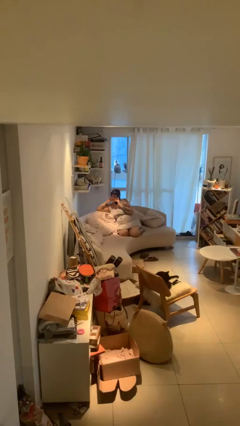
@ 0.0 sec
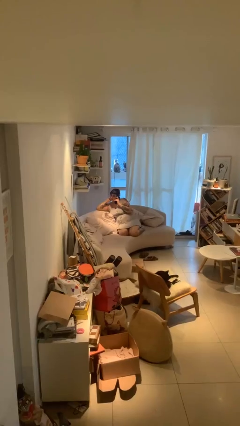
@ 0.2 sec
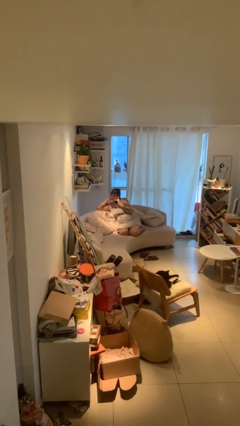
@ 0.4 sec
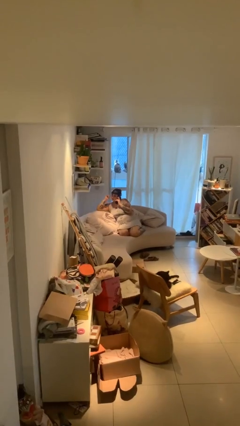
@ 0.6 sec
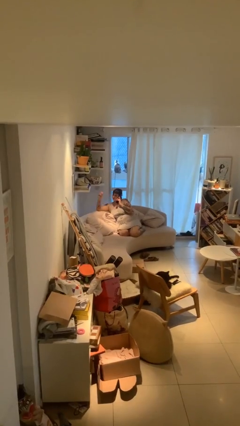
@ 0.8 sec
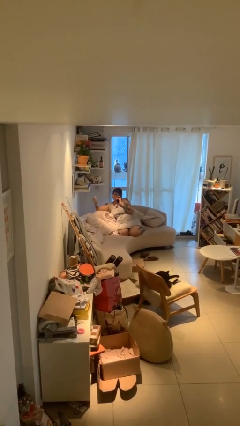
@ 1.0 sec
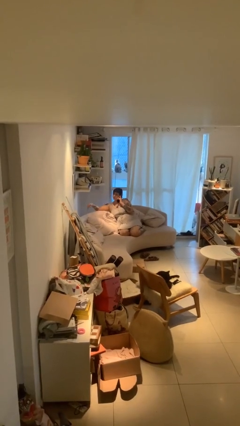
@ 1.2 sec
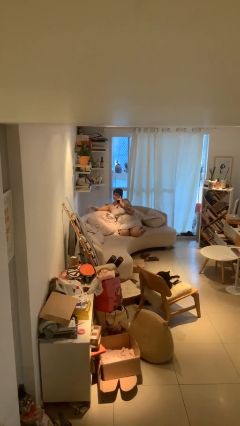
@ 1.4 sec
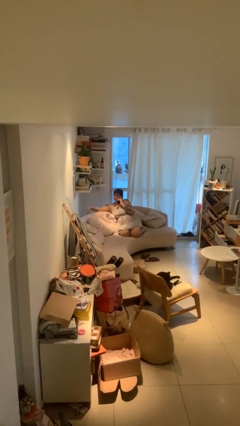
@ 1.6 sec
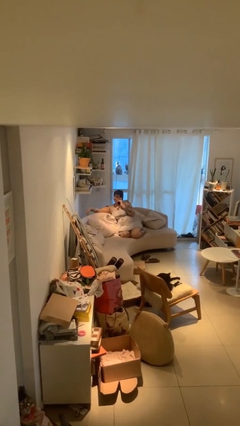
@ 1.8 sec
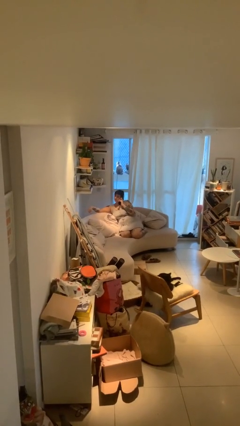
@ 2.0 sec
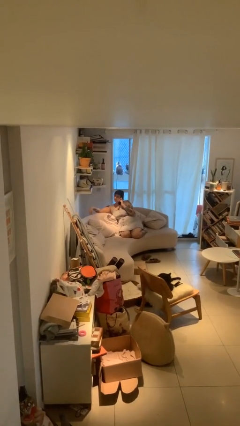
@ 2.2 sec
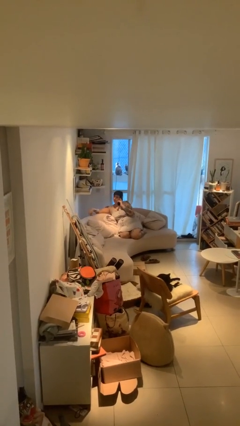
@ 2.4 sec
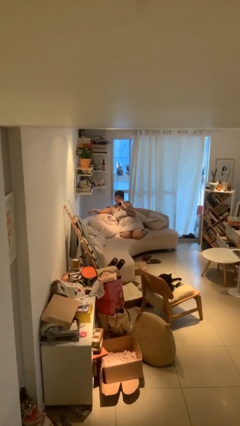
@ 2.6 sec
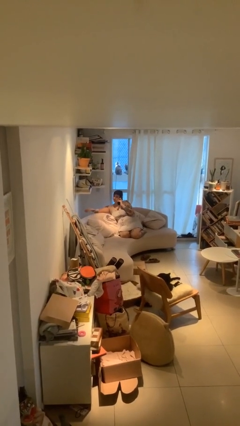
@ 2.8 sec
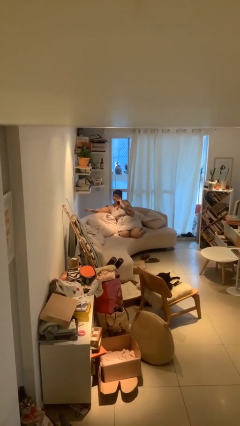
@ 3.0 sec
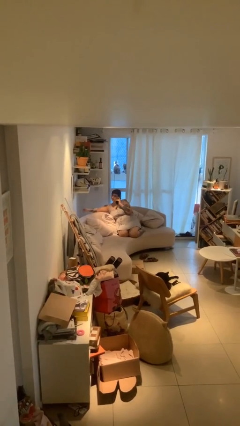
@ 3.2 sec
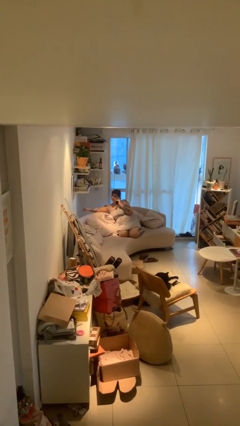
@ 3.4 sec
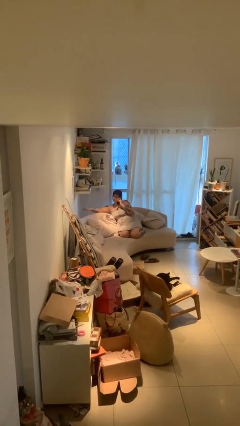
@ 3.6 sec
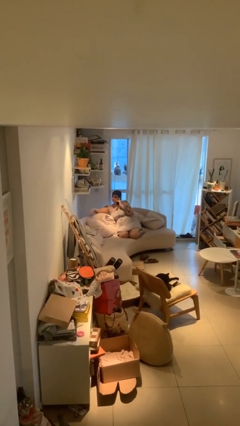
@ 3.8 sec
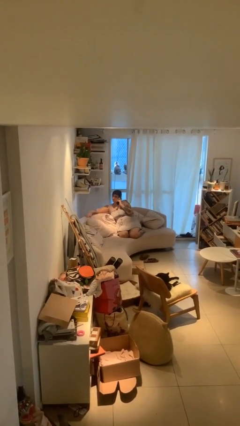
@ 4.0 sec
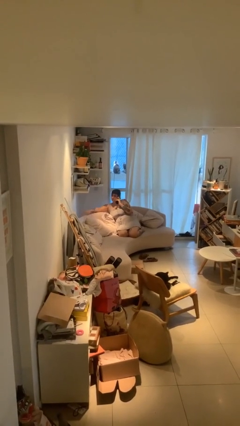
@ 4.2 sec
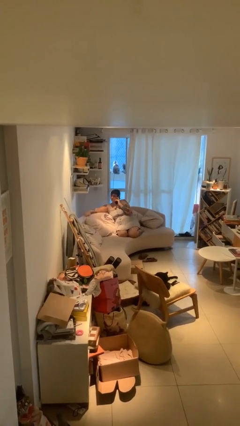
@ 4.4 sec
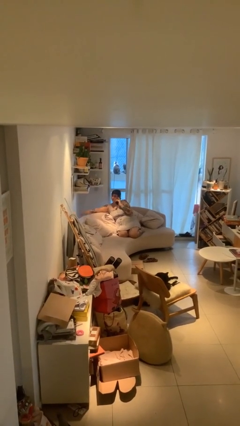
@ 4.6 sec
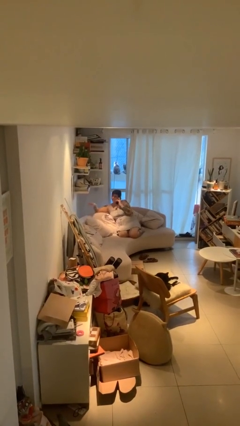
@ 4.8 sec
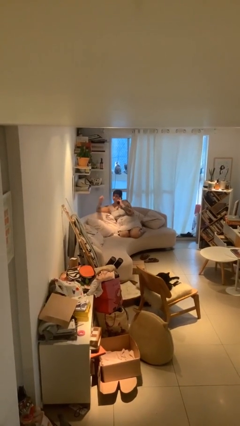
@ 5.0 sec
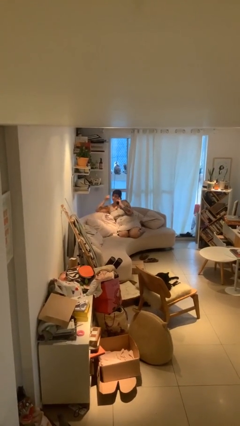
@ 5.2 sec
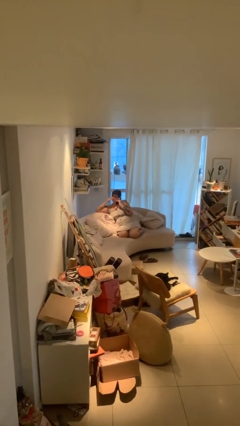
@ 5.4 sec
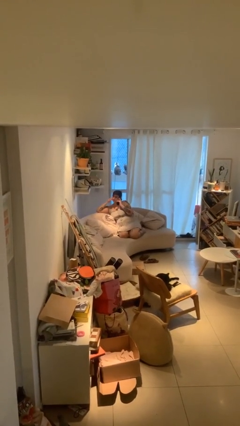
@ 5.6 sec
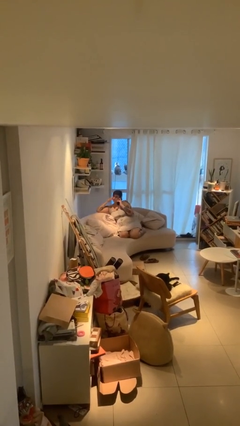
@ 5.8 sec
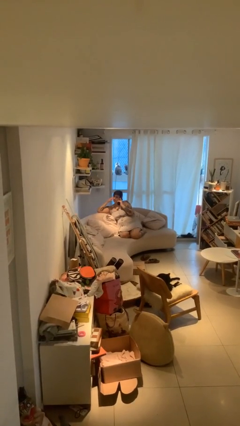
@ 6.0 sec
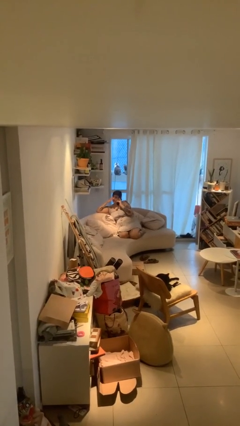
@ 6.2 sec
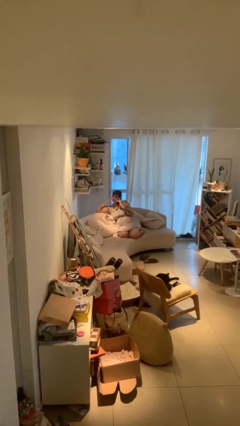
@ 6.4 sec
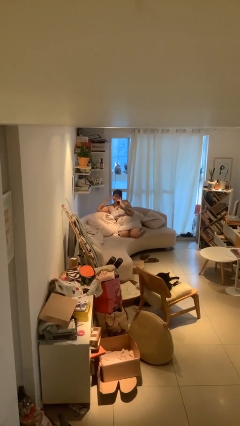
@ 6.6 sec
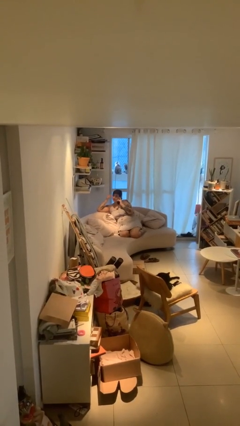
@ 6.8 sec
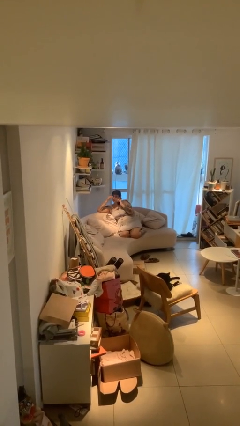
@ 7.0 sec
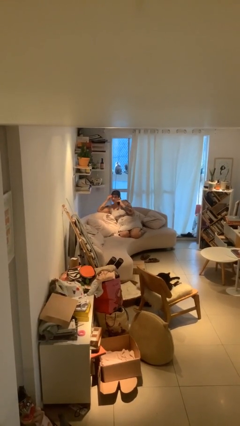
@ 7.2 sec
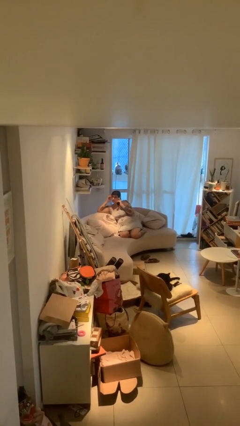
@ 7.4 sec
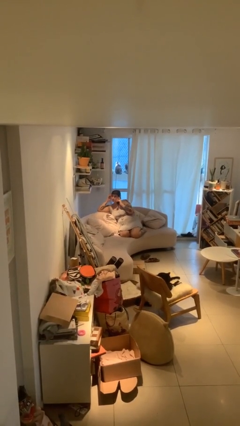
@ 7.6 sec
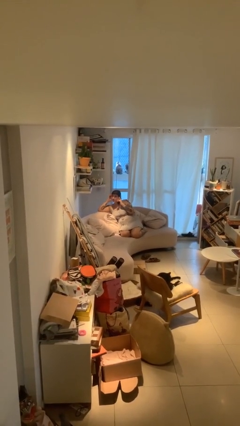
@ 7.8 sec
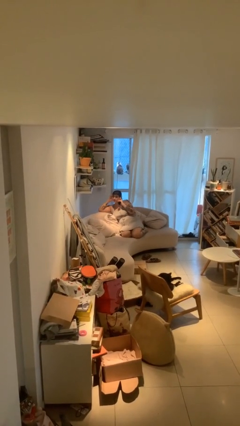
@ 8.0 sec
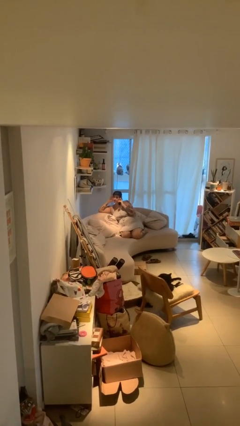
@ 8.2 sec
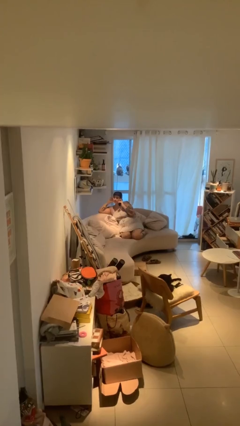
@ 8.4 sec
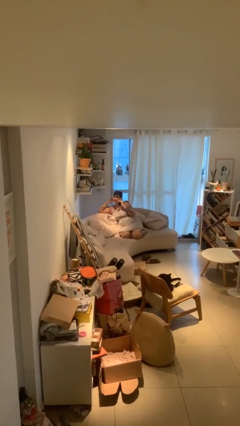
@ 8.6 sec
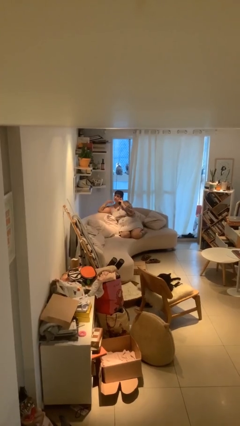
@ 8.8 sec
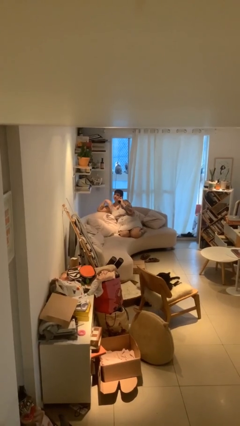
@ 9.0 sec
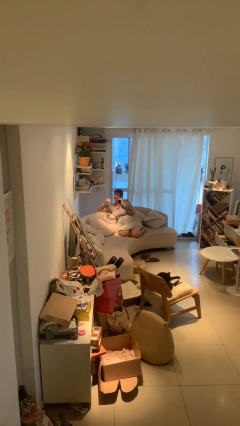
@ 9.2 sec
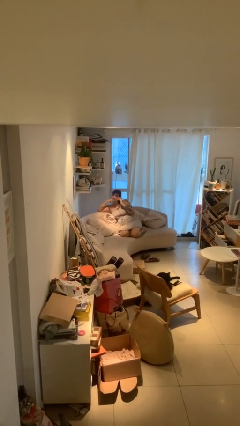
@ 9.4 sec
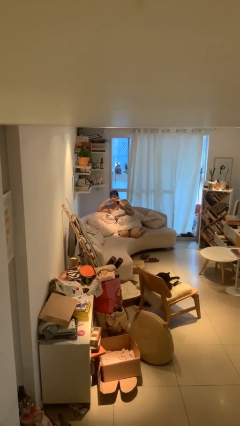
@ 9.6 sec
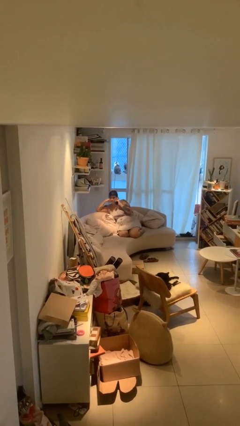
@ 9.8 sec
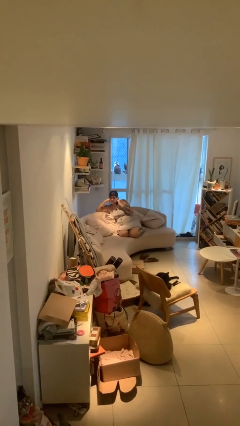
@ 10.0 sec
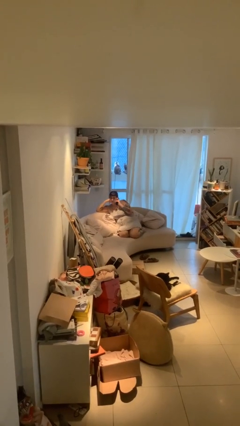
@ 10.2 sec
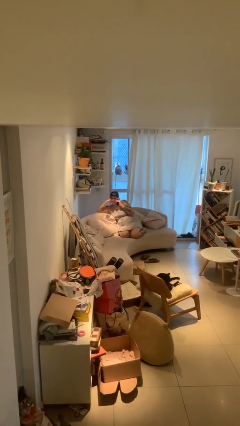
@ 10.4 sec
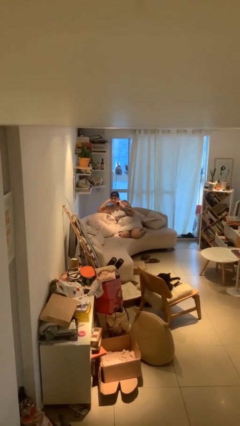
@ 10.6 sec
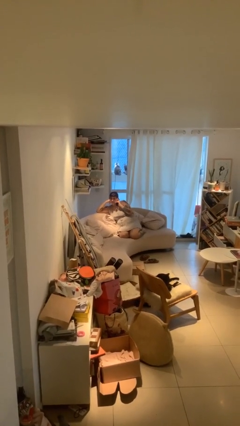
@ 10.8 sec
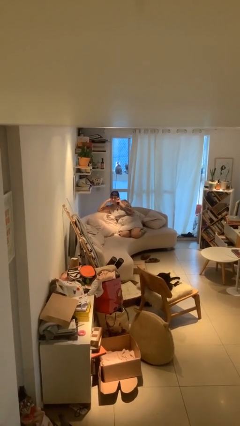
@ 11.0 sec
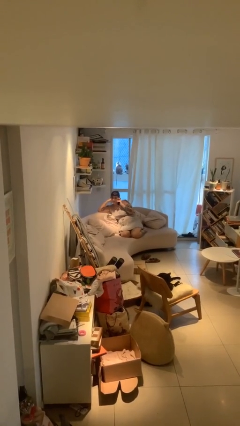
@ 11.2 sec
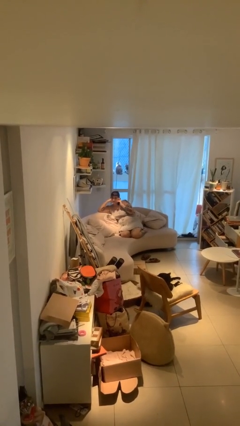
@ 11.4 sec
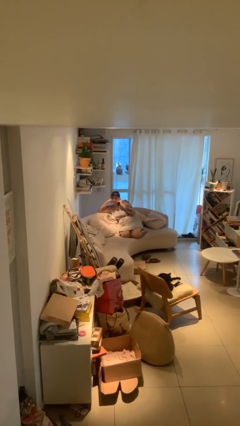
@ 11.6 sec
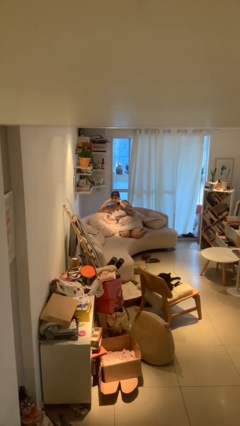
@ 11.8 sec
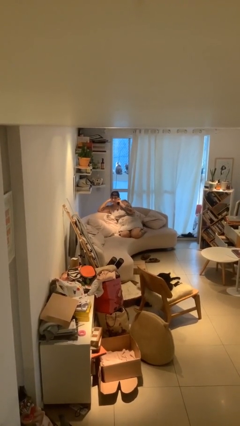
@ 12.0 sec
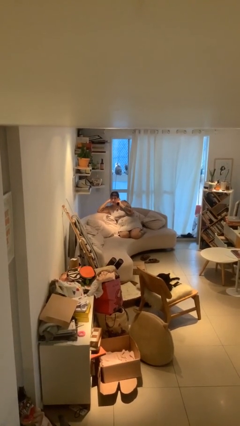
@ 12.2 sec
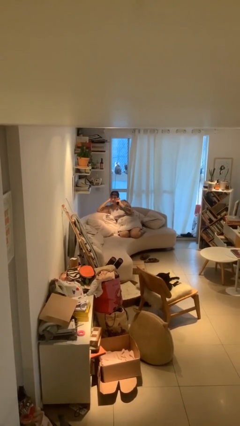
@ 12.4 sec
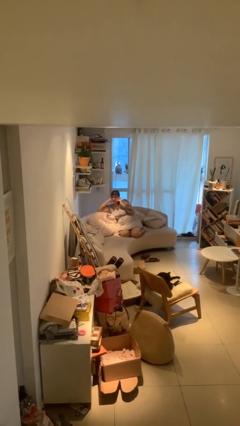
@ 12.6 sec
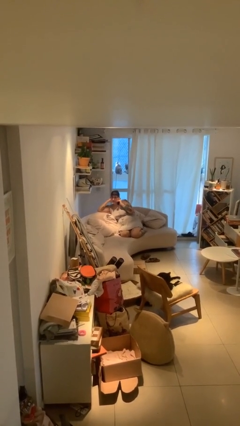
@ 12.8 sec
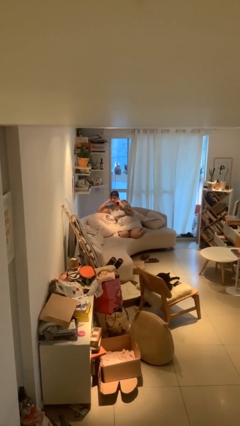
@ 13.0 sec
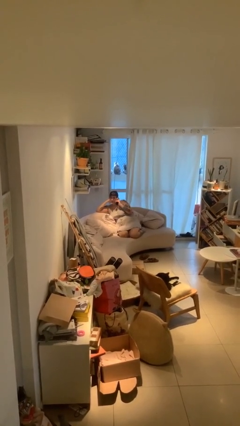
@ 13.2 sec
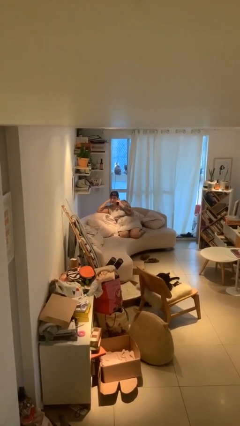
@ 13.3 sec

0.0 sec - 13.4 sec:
person talks on phone

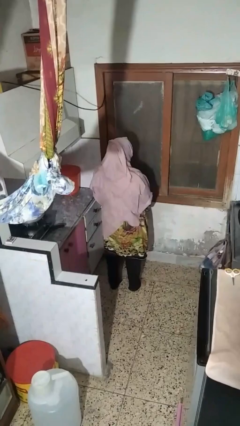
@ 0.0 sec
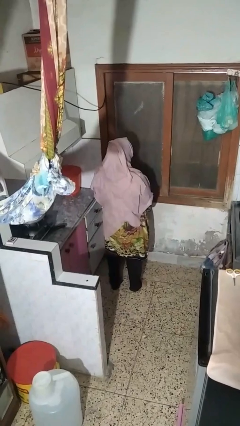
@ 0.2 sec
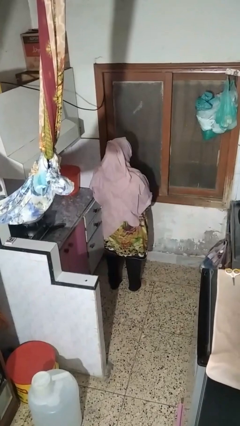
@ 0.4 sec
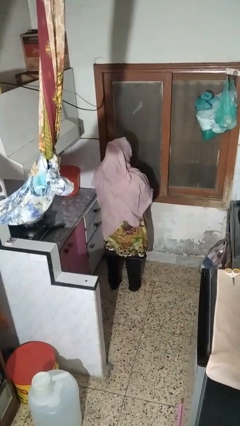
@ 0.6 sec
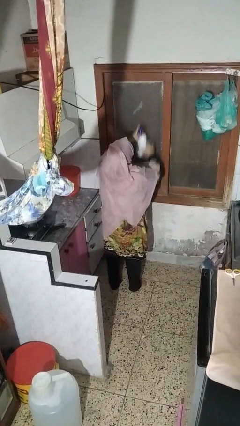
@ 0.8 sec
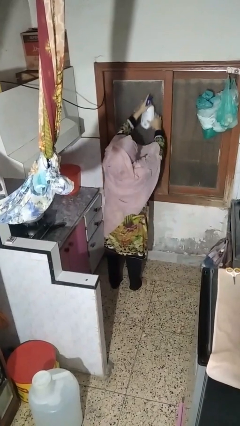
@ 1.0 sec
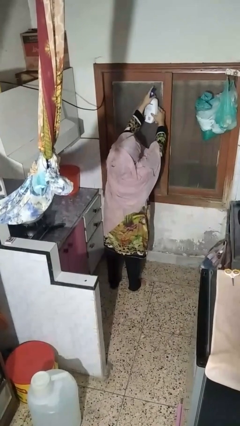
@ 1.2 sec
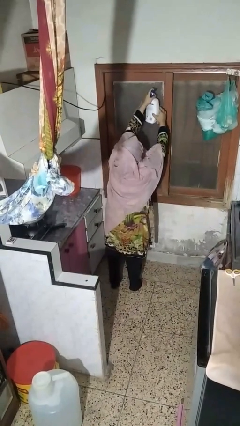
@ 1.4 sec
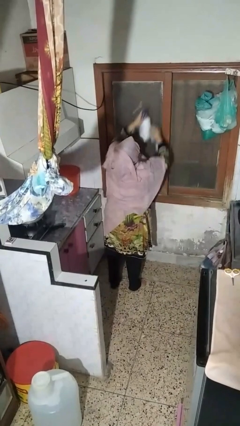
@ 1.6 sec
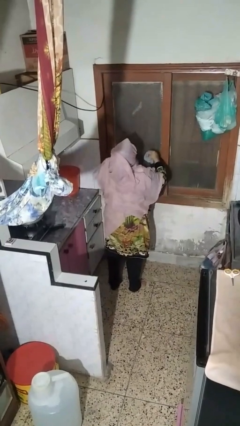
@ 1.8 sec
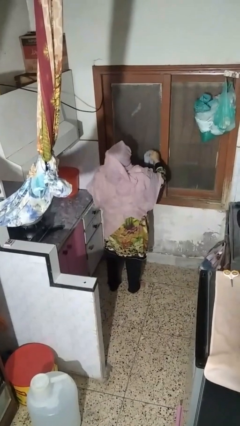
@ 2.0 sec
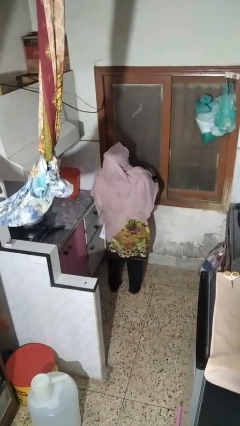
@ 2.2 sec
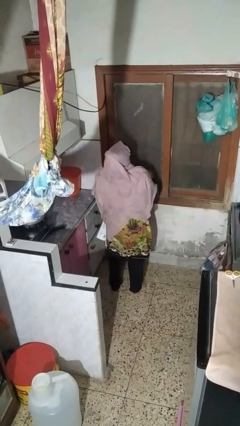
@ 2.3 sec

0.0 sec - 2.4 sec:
person sprays from bottle

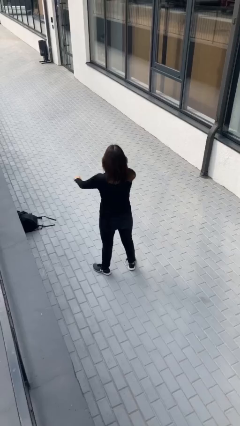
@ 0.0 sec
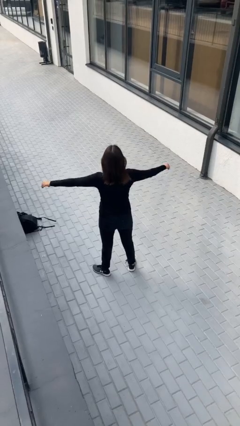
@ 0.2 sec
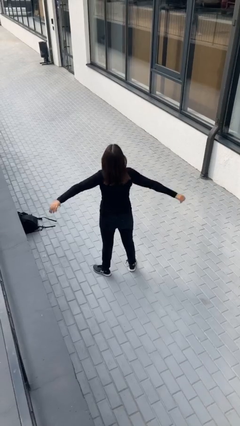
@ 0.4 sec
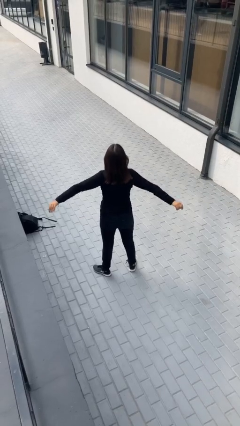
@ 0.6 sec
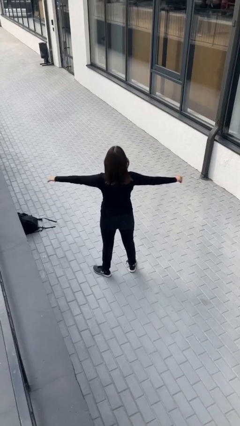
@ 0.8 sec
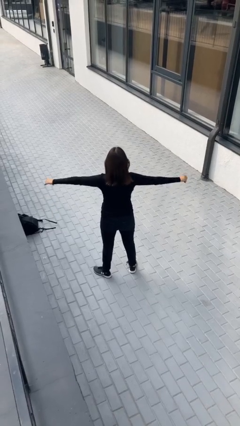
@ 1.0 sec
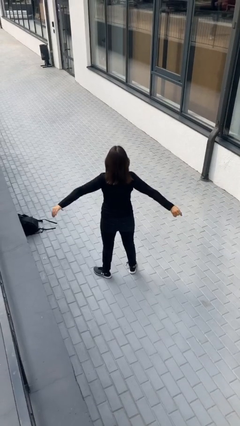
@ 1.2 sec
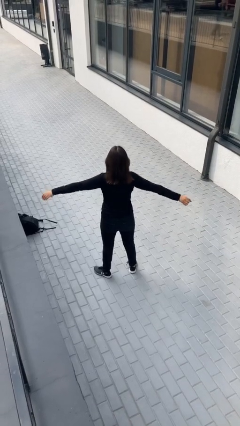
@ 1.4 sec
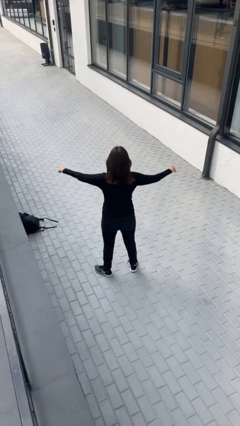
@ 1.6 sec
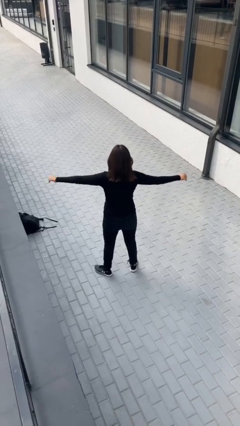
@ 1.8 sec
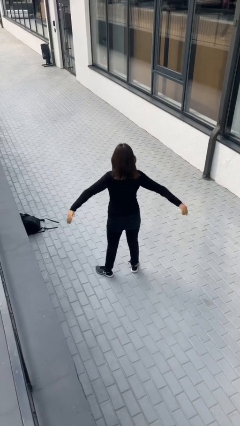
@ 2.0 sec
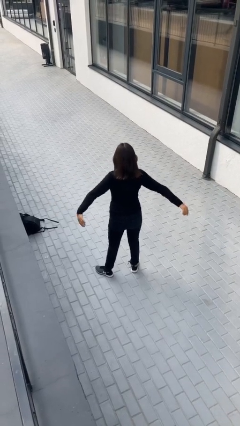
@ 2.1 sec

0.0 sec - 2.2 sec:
person stretches arms to side
